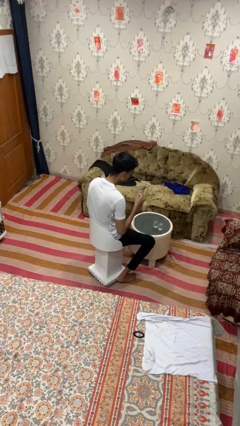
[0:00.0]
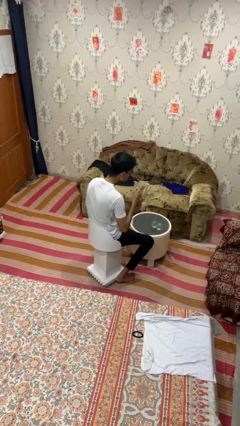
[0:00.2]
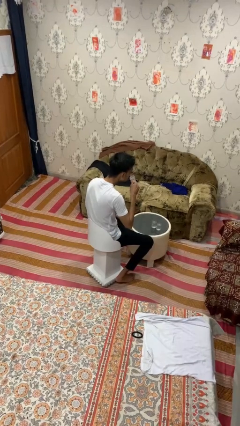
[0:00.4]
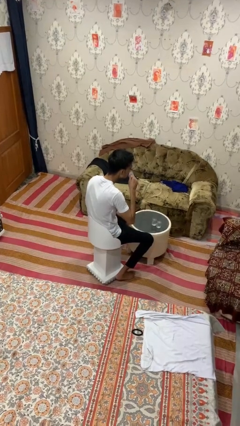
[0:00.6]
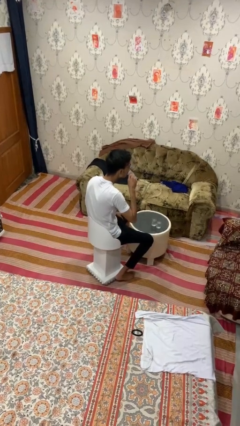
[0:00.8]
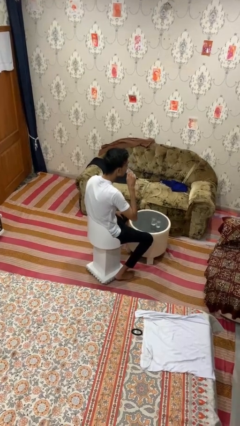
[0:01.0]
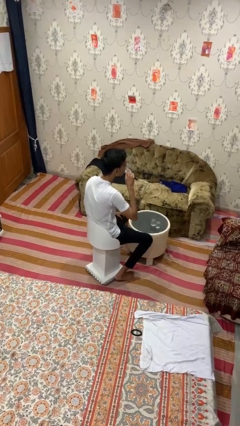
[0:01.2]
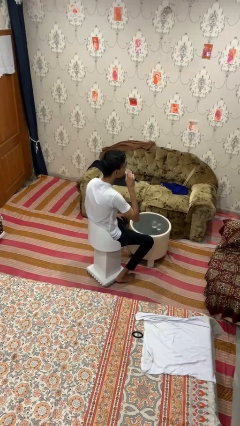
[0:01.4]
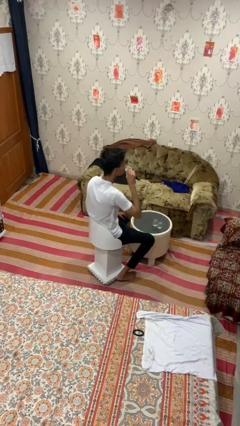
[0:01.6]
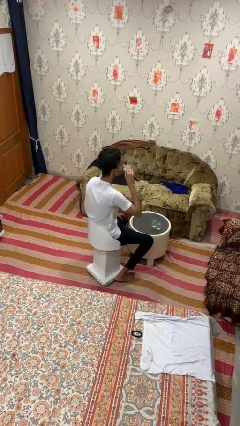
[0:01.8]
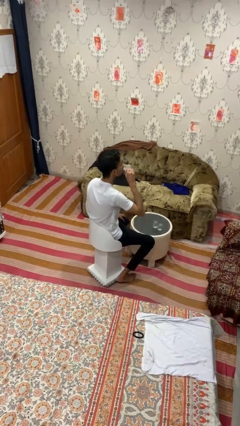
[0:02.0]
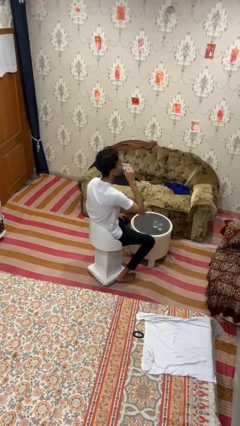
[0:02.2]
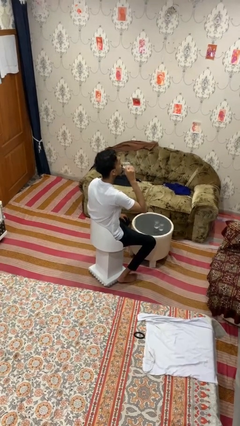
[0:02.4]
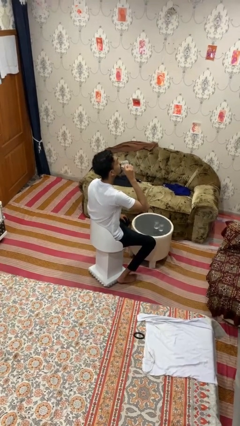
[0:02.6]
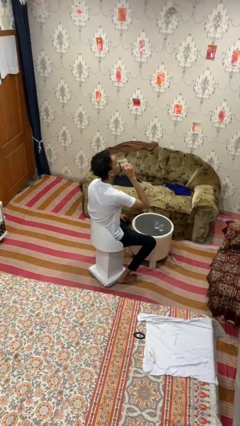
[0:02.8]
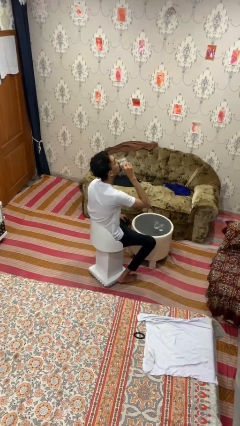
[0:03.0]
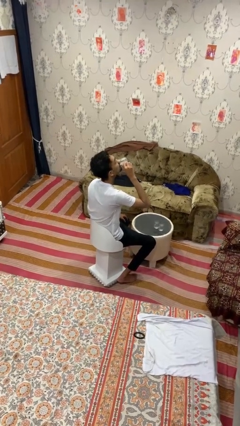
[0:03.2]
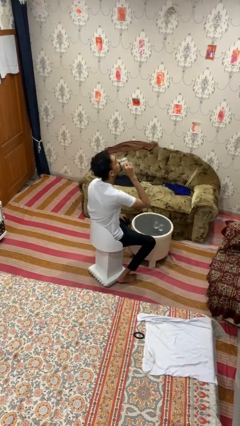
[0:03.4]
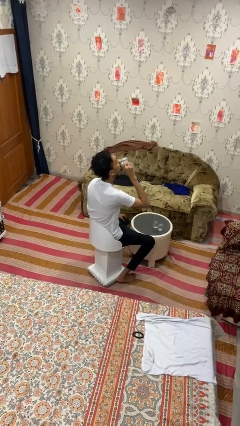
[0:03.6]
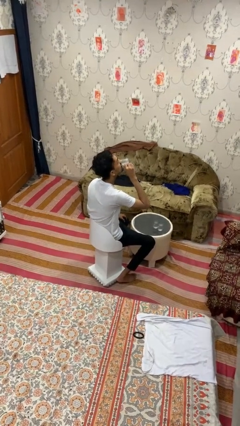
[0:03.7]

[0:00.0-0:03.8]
person drinks from shotglass

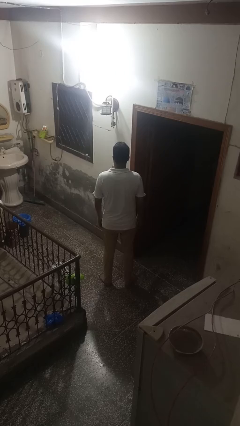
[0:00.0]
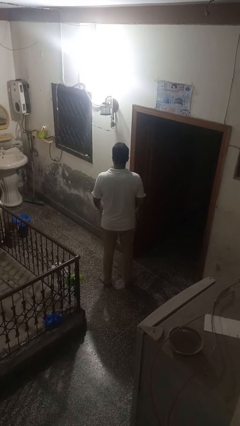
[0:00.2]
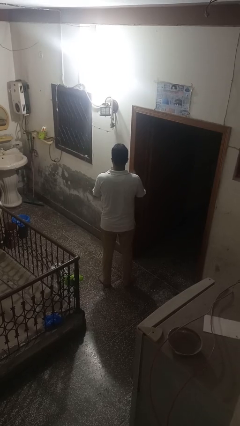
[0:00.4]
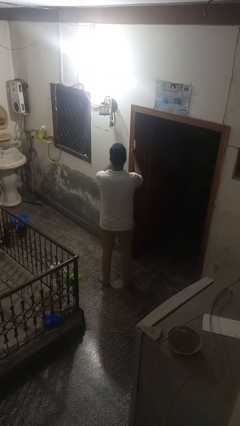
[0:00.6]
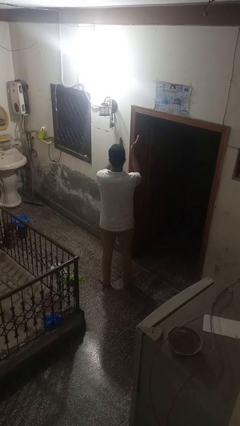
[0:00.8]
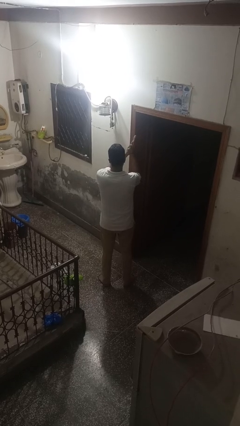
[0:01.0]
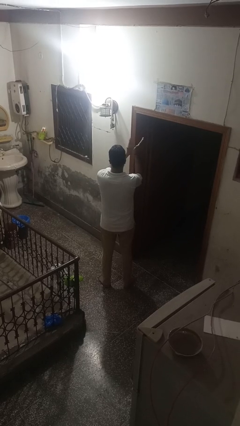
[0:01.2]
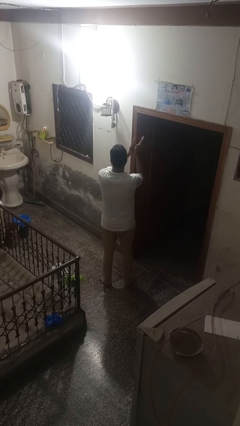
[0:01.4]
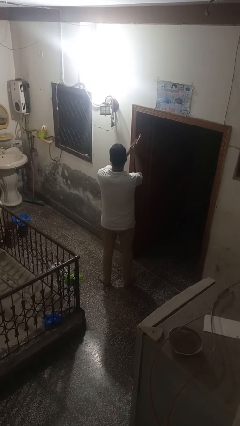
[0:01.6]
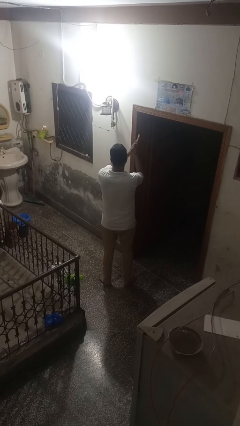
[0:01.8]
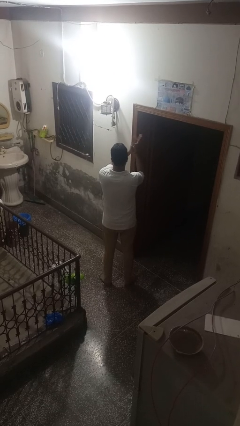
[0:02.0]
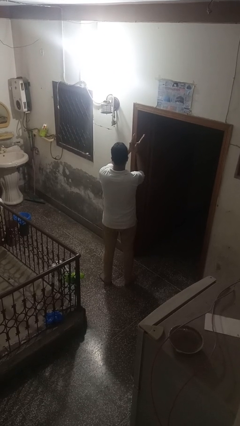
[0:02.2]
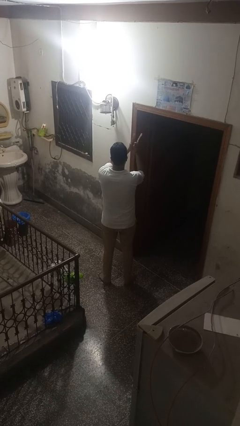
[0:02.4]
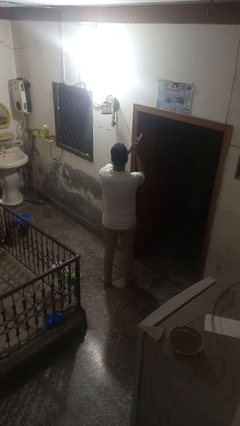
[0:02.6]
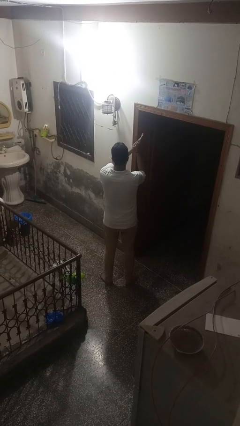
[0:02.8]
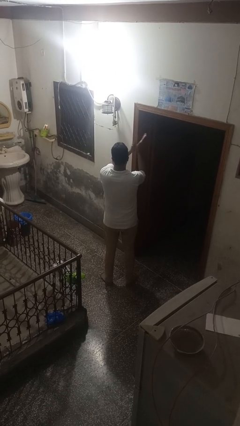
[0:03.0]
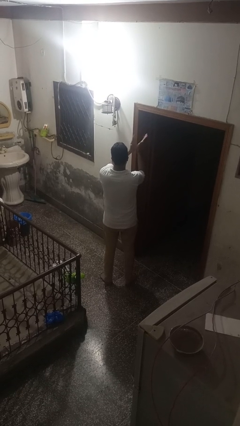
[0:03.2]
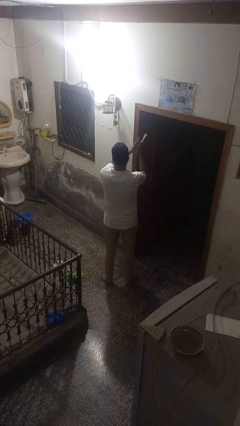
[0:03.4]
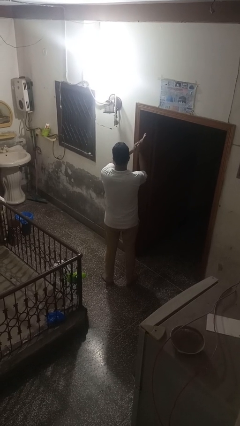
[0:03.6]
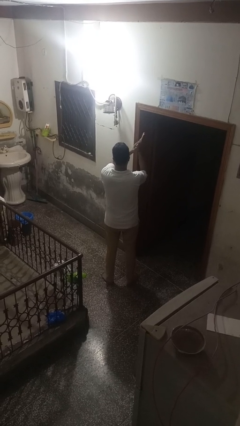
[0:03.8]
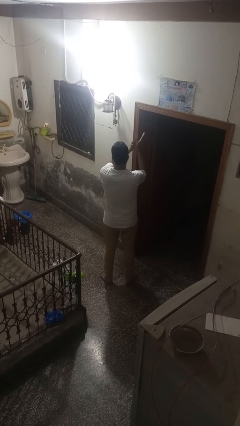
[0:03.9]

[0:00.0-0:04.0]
person claps hands

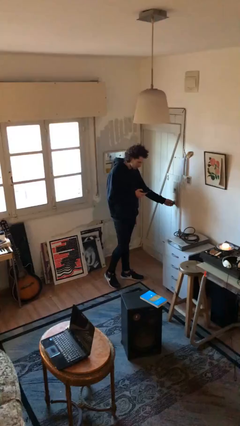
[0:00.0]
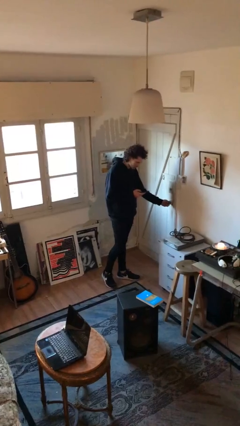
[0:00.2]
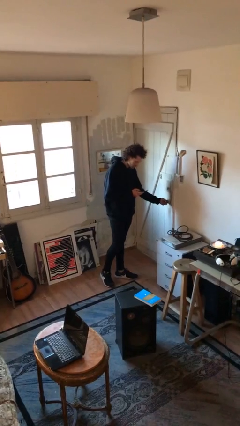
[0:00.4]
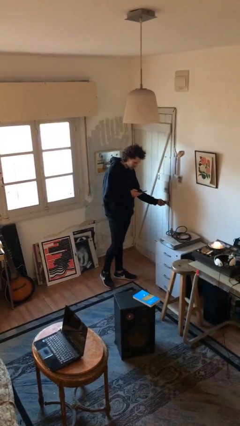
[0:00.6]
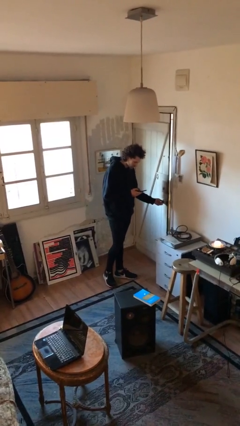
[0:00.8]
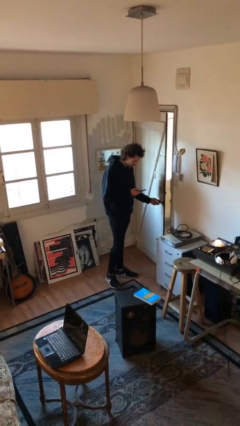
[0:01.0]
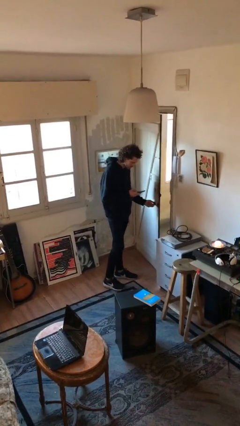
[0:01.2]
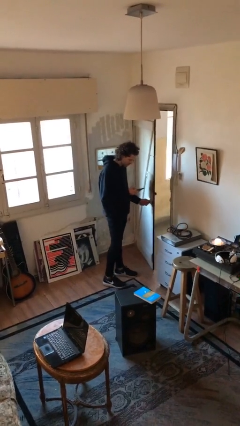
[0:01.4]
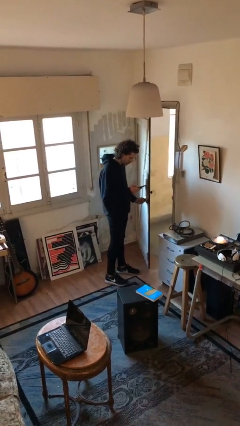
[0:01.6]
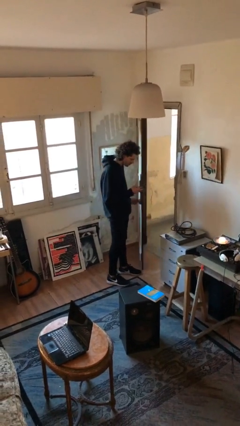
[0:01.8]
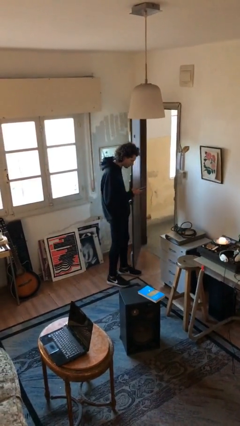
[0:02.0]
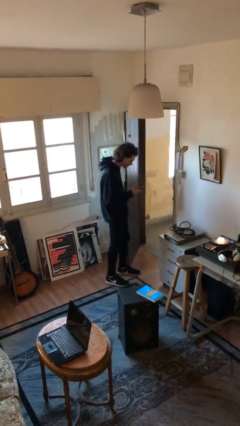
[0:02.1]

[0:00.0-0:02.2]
person opens facility door

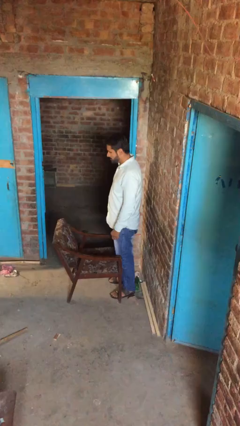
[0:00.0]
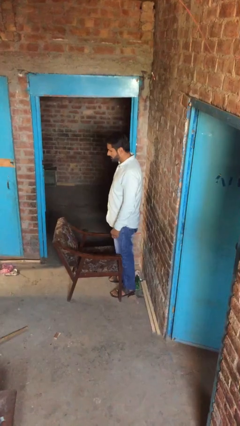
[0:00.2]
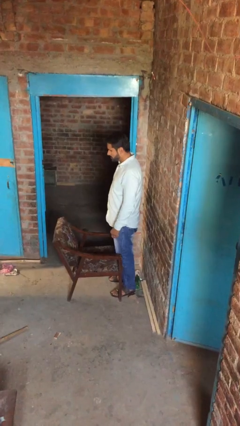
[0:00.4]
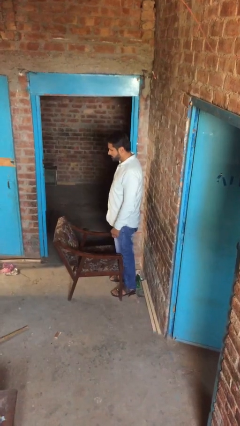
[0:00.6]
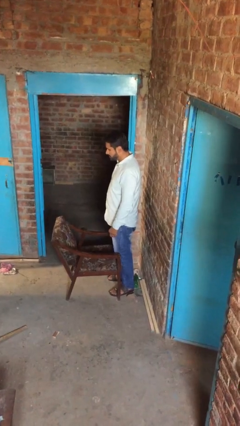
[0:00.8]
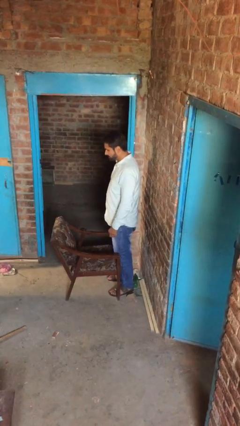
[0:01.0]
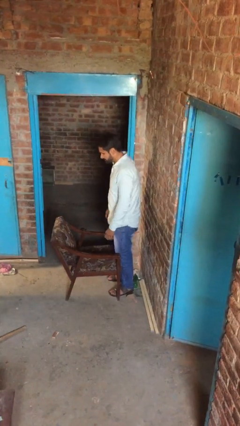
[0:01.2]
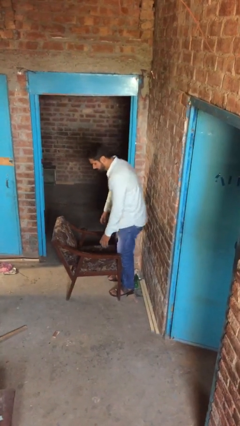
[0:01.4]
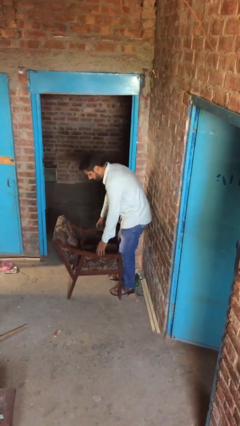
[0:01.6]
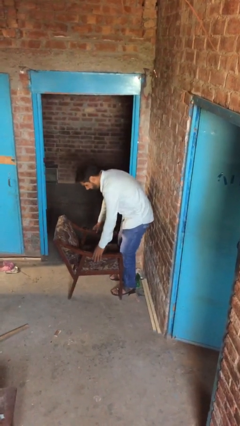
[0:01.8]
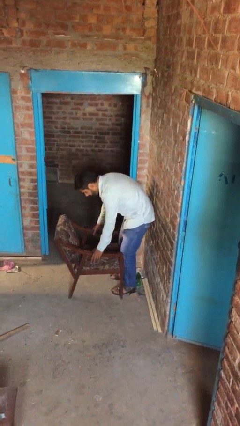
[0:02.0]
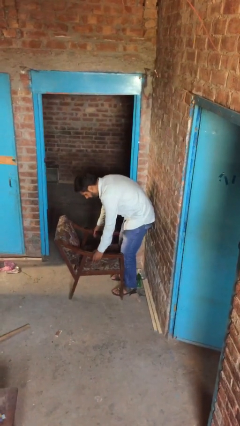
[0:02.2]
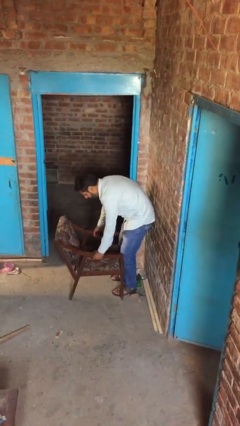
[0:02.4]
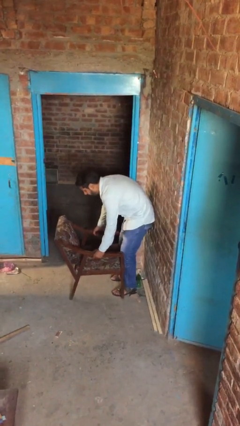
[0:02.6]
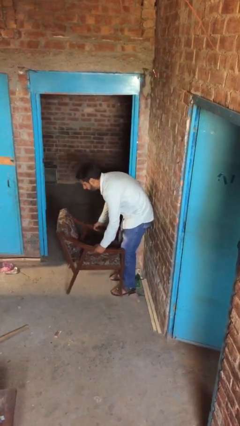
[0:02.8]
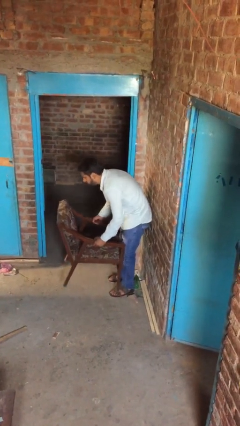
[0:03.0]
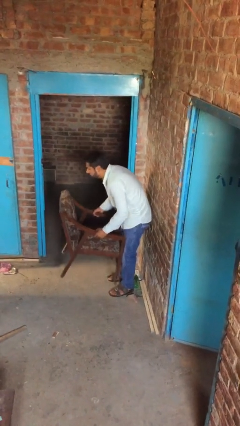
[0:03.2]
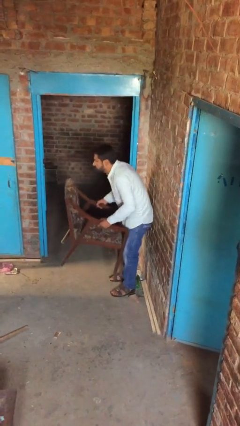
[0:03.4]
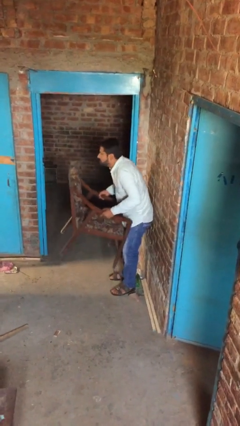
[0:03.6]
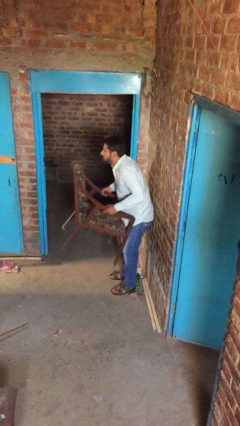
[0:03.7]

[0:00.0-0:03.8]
person picks up object from floor

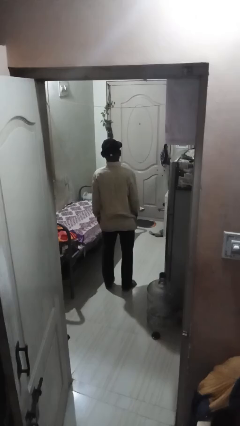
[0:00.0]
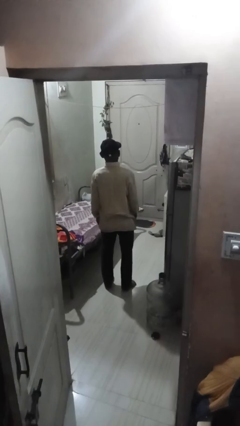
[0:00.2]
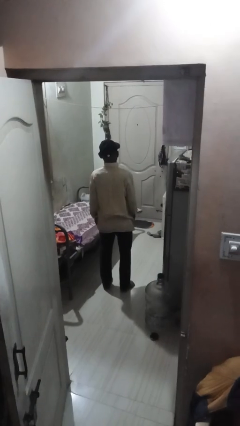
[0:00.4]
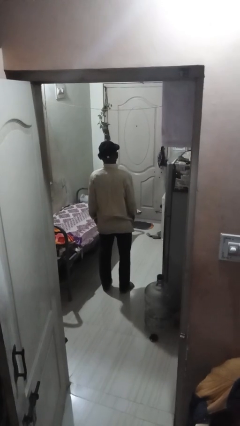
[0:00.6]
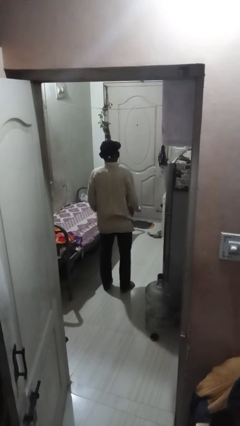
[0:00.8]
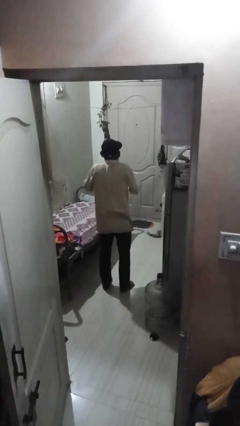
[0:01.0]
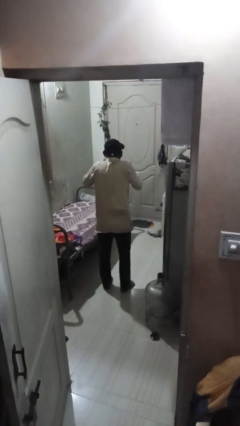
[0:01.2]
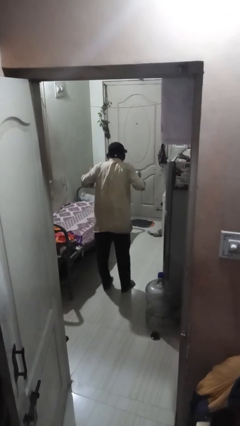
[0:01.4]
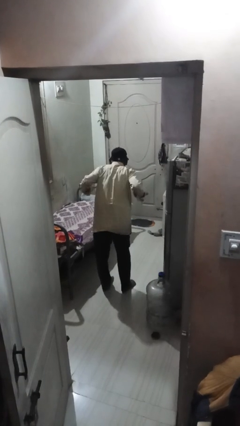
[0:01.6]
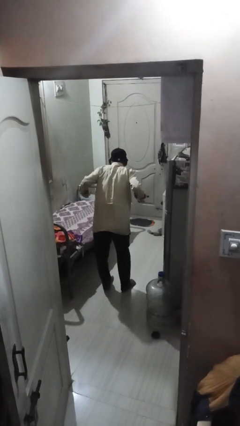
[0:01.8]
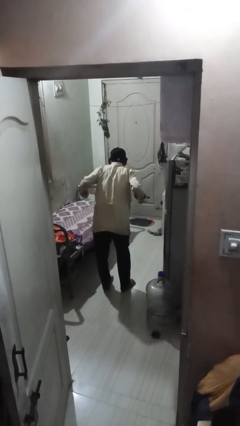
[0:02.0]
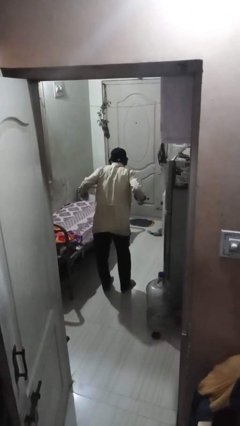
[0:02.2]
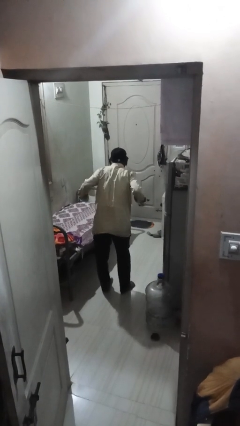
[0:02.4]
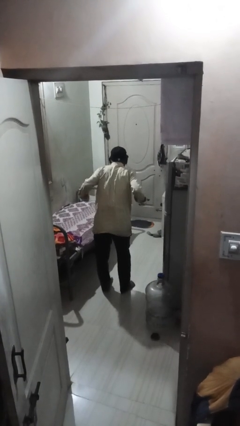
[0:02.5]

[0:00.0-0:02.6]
person shrugs

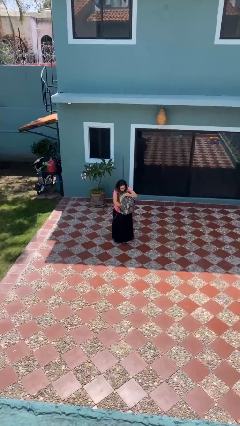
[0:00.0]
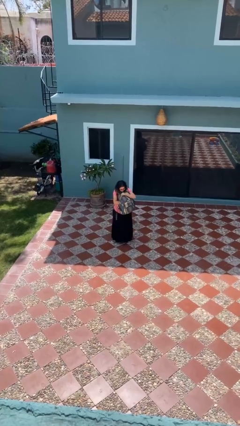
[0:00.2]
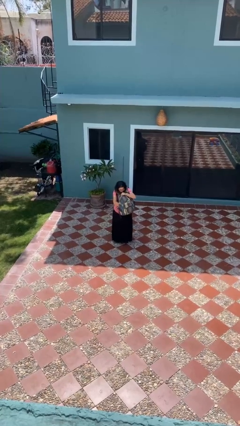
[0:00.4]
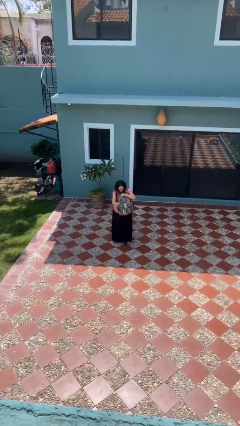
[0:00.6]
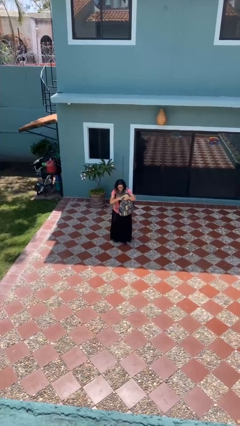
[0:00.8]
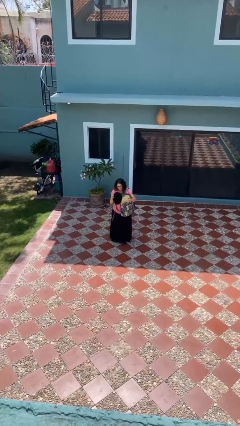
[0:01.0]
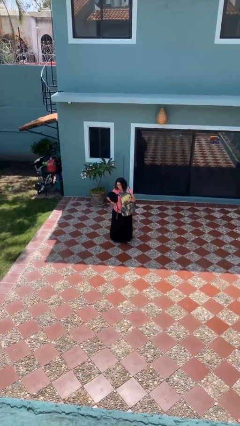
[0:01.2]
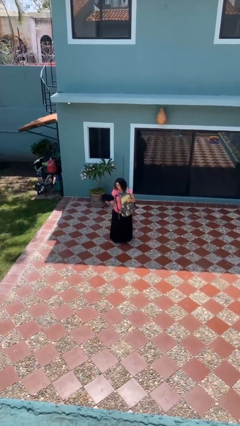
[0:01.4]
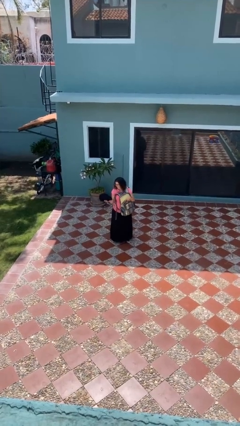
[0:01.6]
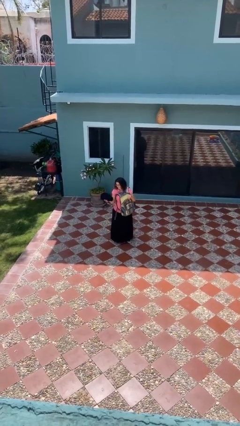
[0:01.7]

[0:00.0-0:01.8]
person takes object from backpack
